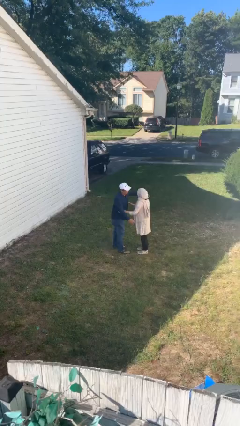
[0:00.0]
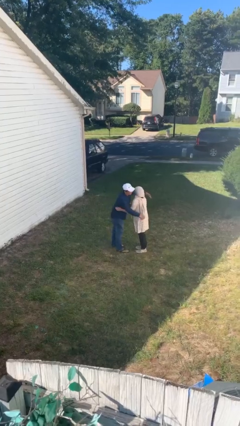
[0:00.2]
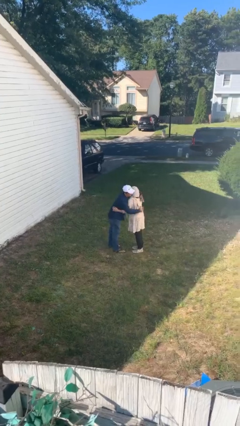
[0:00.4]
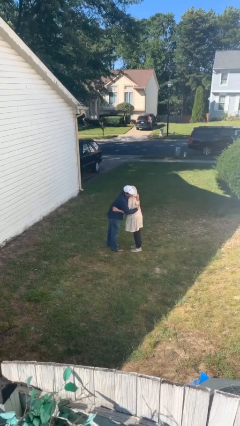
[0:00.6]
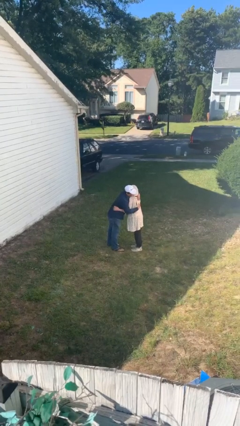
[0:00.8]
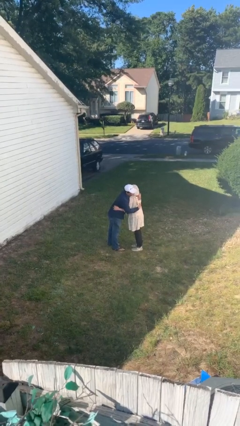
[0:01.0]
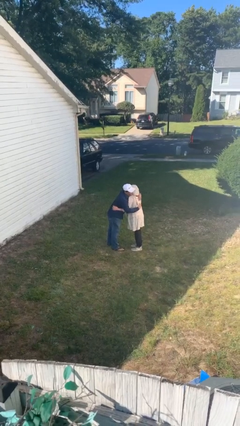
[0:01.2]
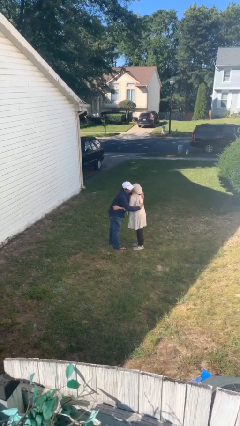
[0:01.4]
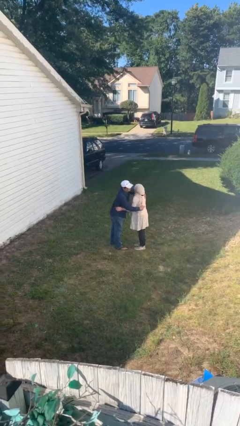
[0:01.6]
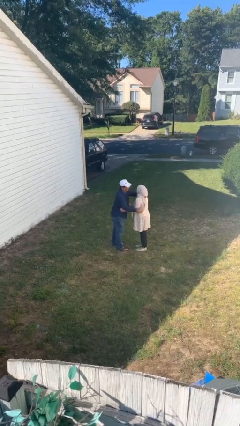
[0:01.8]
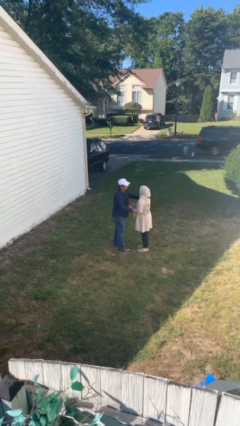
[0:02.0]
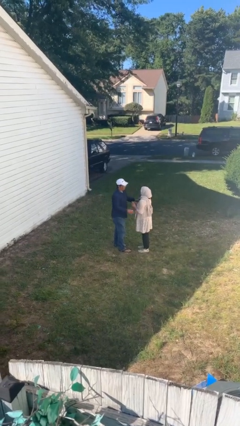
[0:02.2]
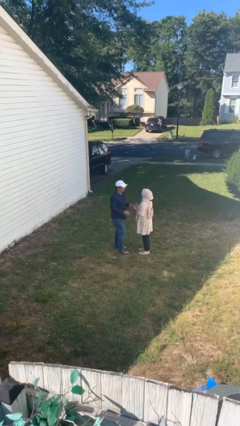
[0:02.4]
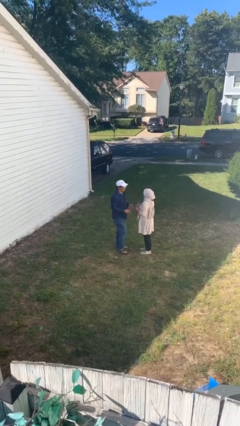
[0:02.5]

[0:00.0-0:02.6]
person embraces person

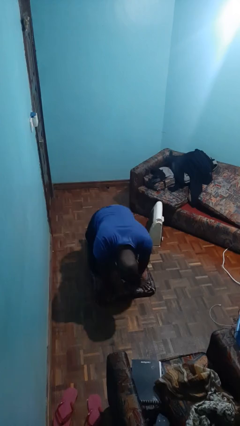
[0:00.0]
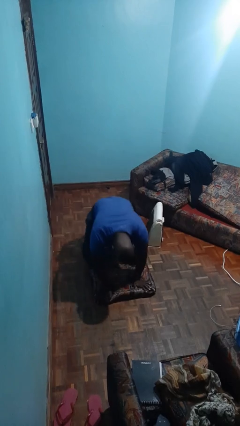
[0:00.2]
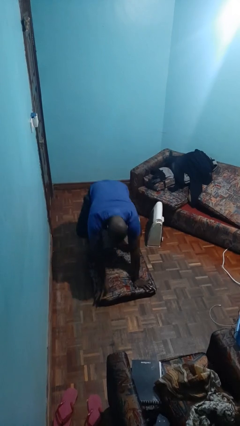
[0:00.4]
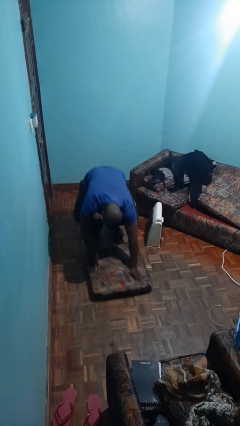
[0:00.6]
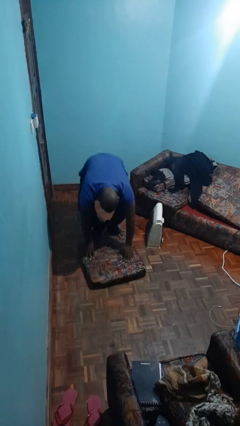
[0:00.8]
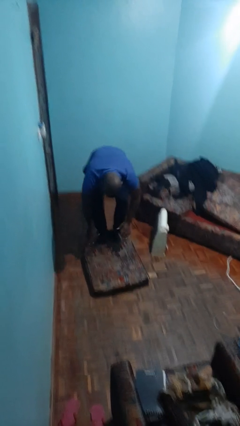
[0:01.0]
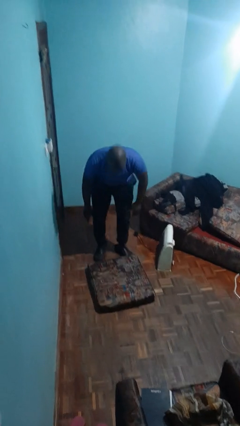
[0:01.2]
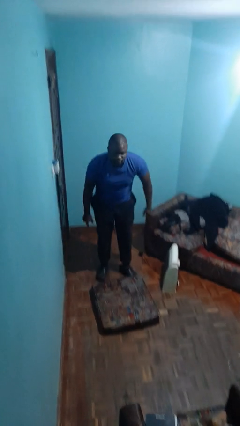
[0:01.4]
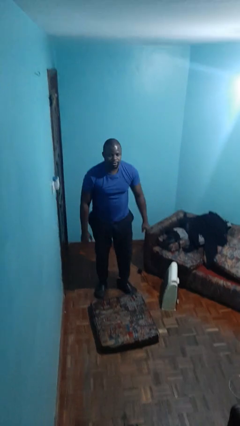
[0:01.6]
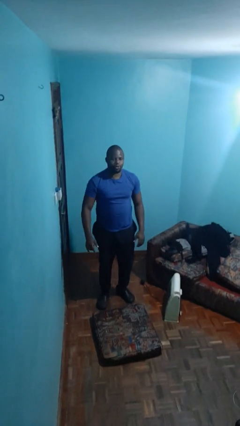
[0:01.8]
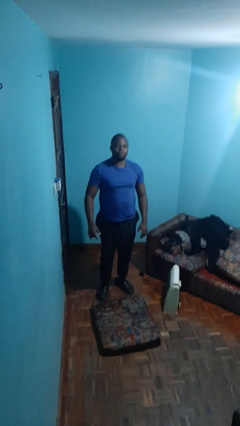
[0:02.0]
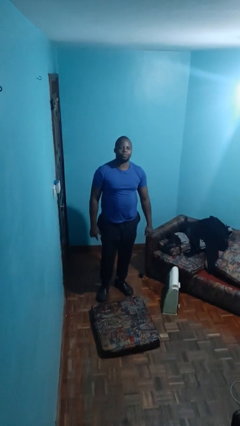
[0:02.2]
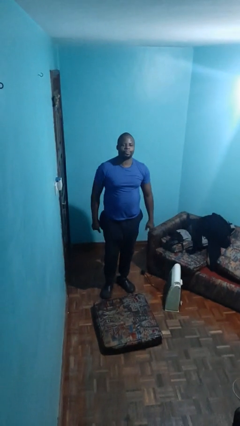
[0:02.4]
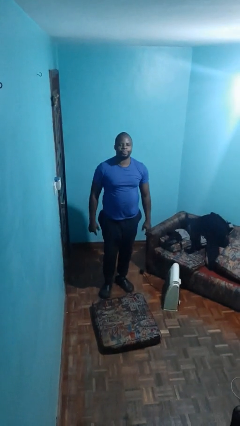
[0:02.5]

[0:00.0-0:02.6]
person stands up from floor

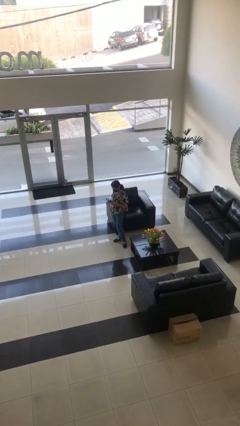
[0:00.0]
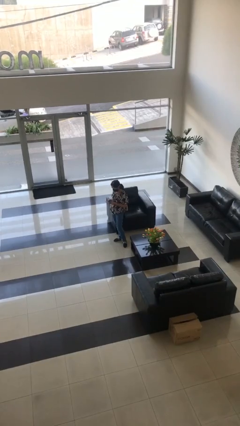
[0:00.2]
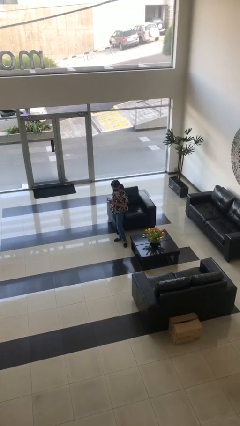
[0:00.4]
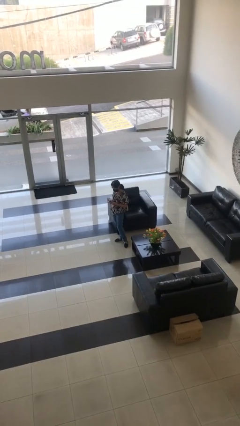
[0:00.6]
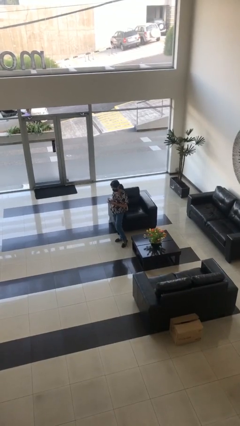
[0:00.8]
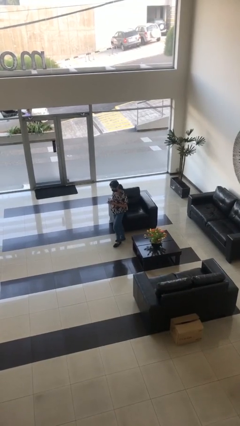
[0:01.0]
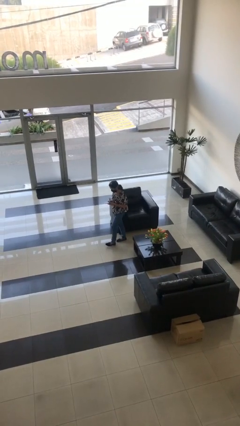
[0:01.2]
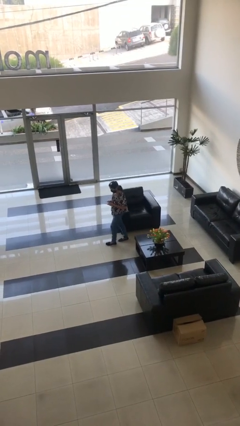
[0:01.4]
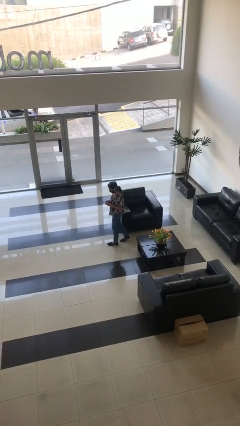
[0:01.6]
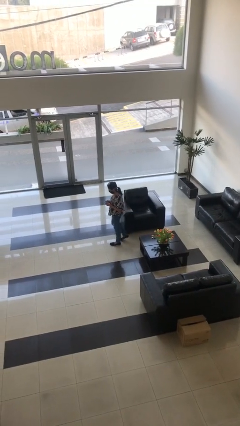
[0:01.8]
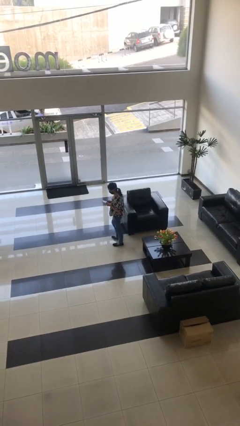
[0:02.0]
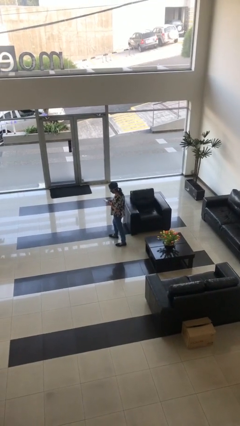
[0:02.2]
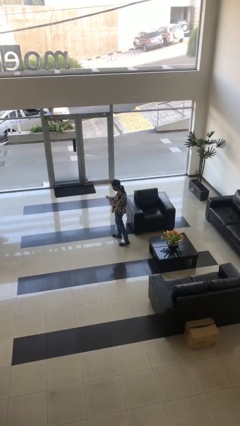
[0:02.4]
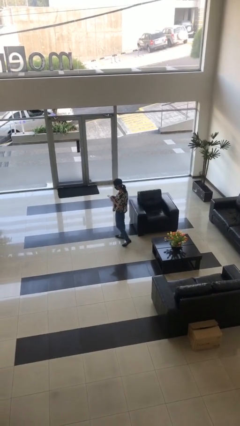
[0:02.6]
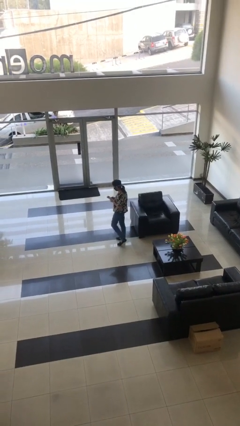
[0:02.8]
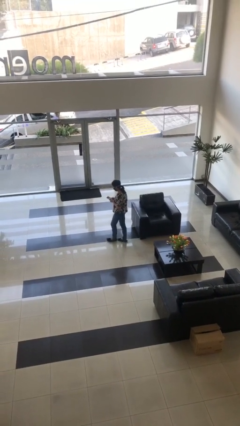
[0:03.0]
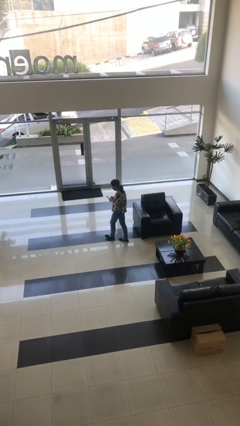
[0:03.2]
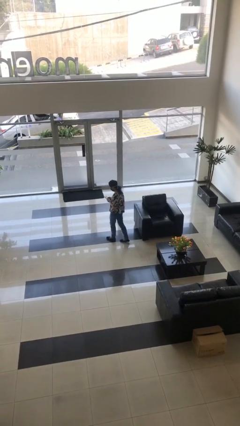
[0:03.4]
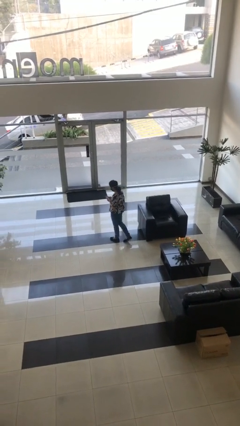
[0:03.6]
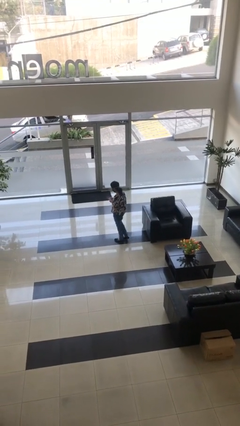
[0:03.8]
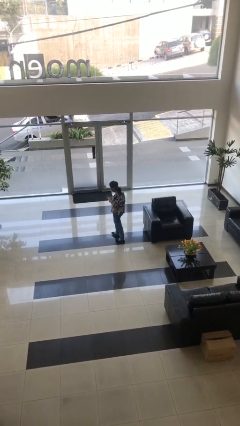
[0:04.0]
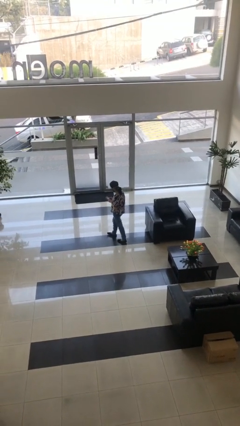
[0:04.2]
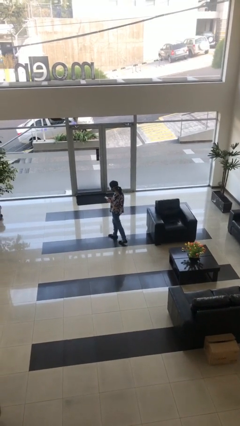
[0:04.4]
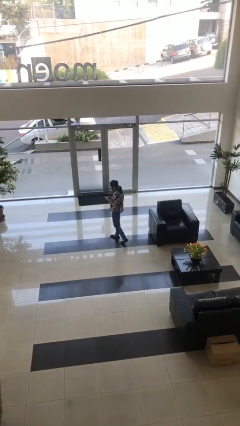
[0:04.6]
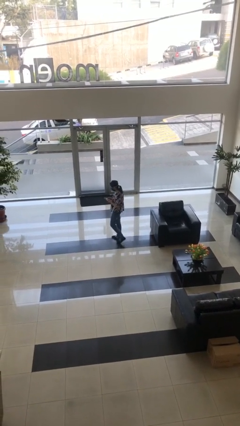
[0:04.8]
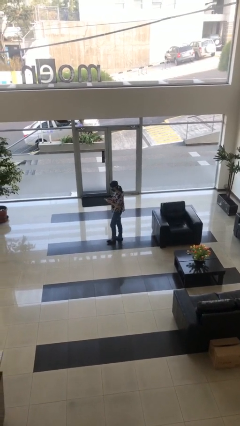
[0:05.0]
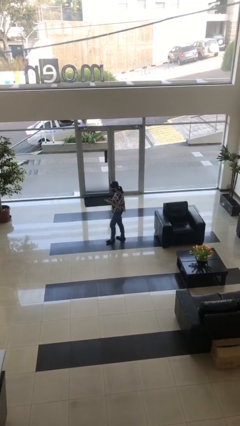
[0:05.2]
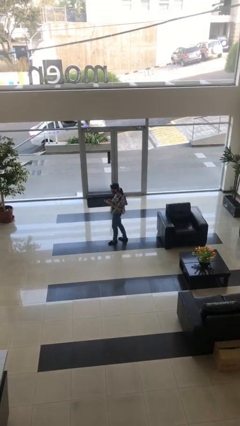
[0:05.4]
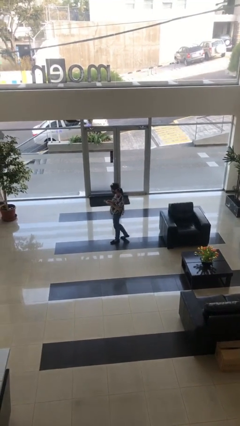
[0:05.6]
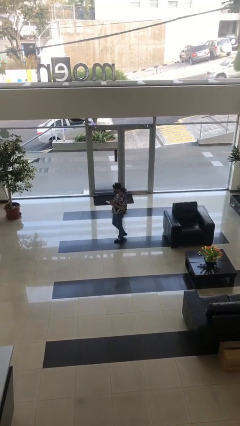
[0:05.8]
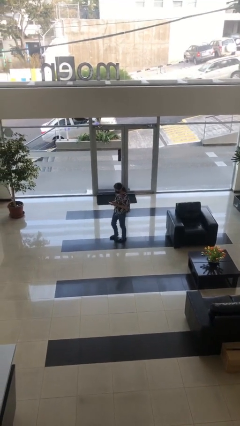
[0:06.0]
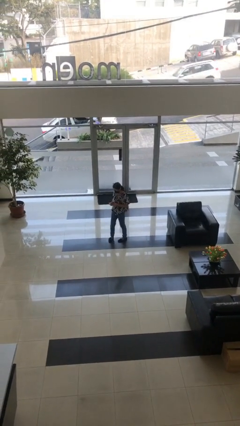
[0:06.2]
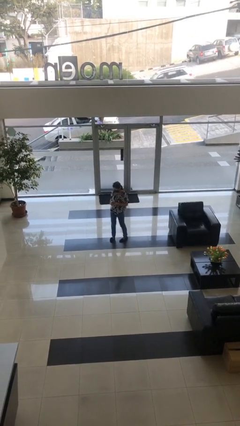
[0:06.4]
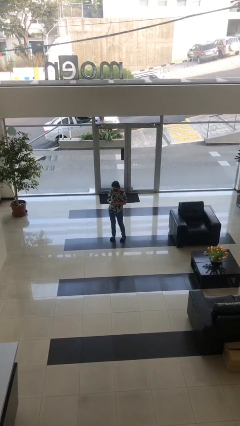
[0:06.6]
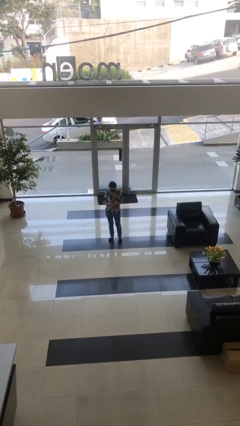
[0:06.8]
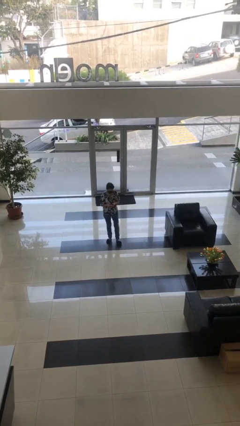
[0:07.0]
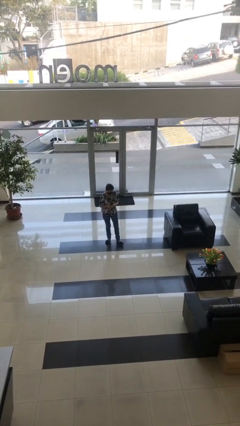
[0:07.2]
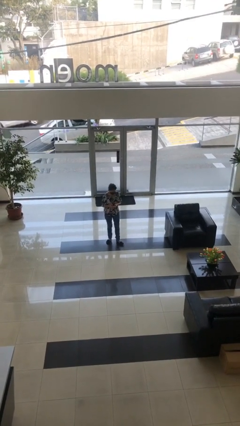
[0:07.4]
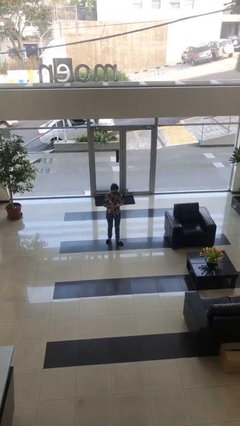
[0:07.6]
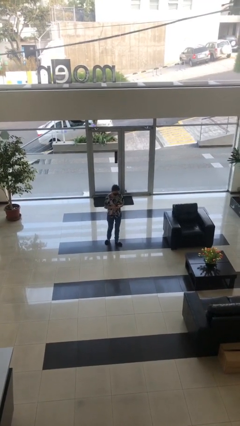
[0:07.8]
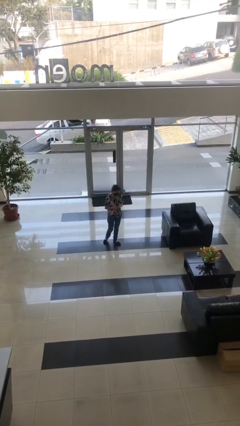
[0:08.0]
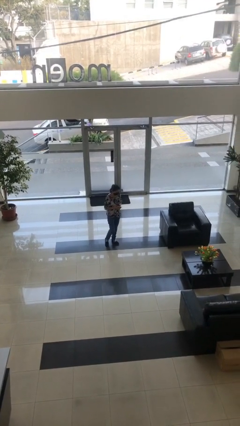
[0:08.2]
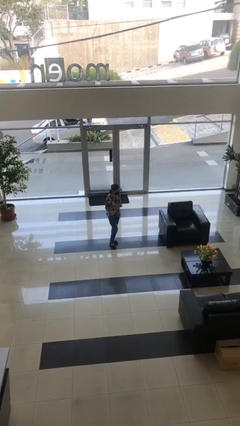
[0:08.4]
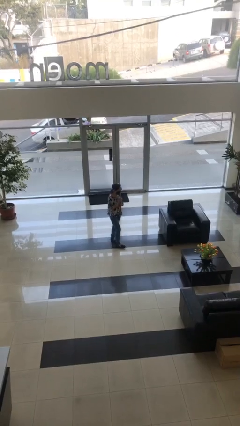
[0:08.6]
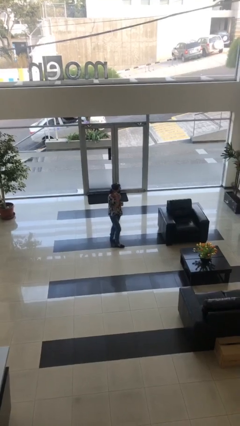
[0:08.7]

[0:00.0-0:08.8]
person texts on phone

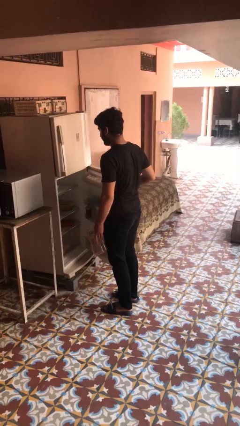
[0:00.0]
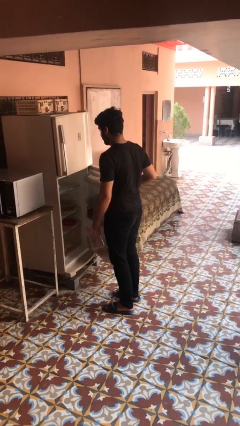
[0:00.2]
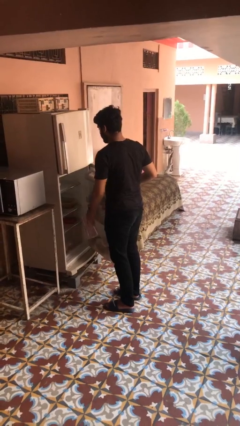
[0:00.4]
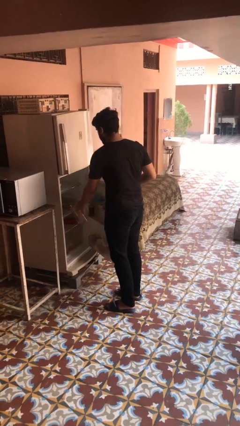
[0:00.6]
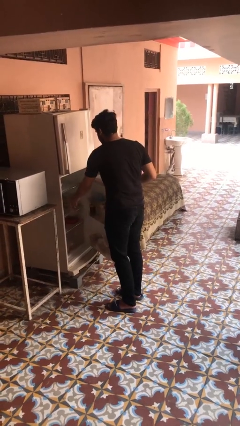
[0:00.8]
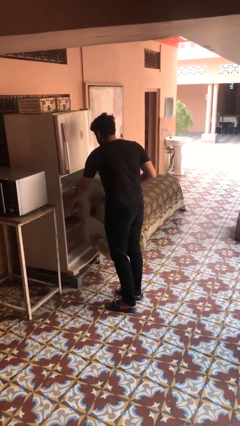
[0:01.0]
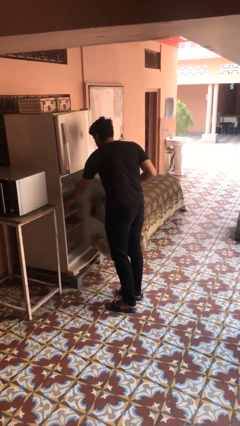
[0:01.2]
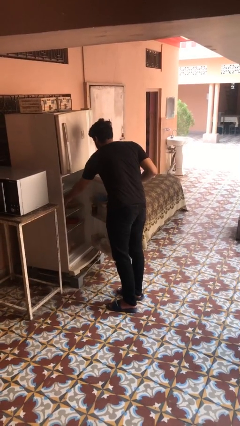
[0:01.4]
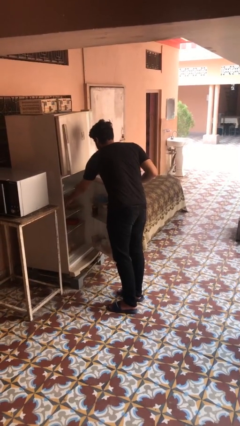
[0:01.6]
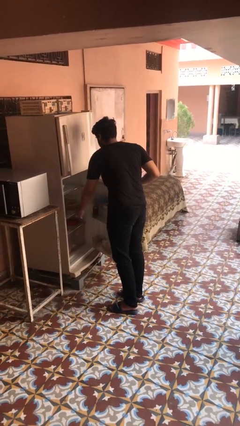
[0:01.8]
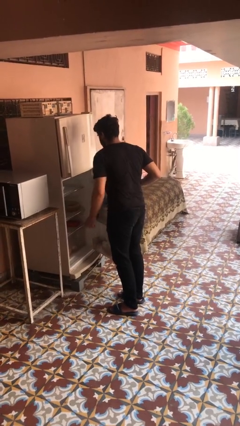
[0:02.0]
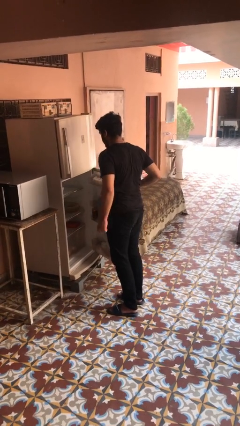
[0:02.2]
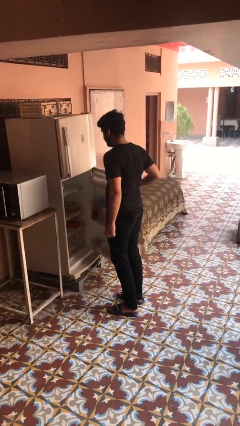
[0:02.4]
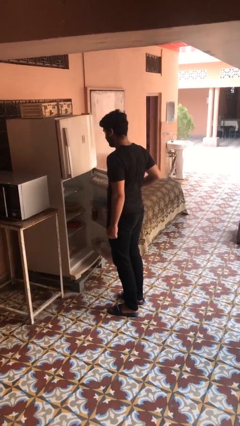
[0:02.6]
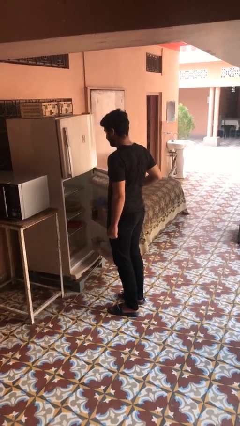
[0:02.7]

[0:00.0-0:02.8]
person puts object into refrigerator

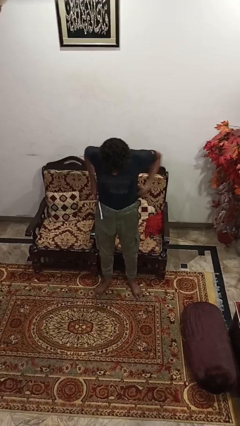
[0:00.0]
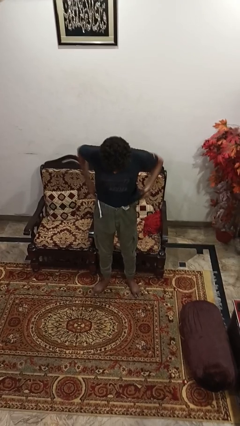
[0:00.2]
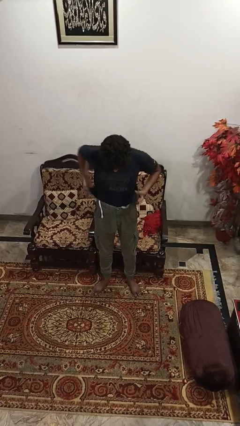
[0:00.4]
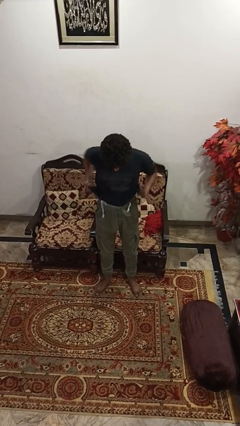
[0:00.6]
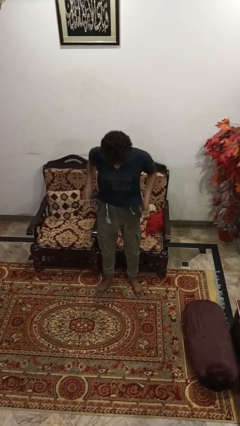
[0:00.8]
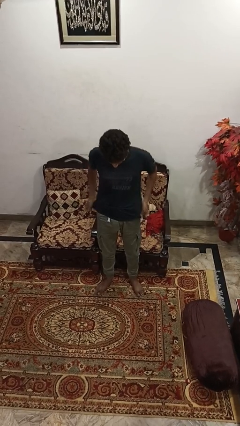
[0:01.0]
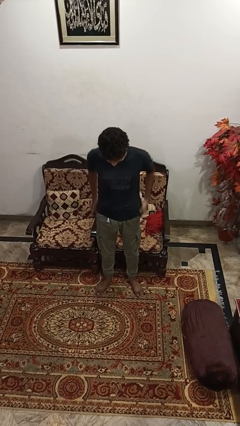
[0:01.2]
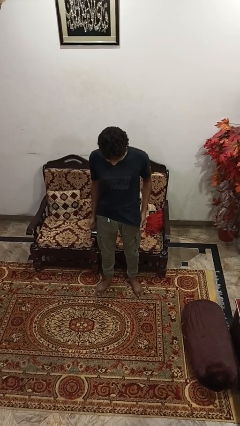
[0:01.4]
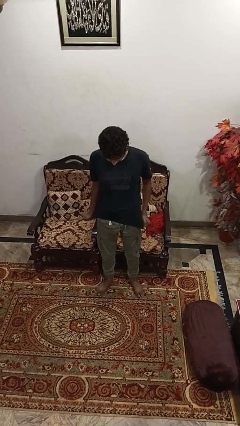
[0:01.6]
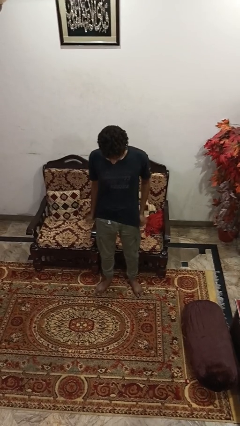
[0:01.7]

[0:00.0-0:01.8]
person untucks shirt
